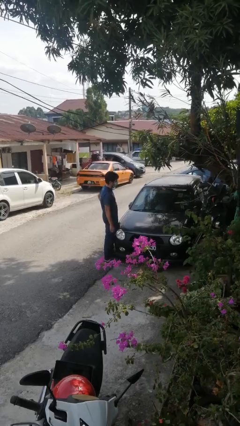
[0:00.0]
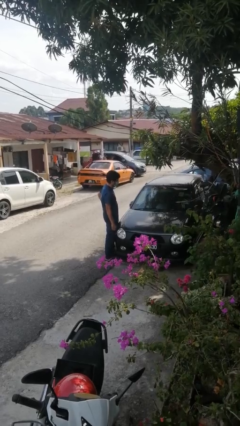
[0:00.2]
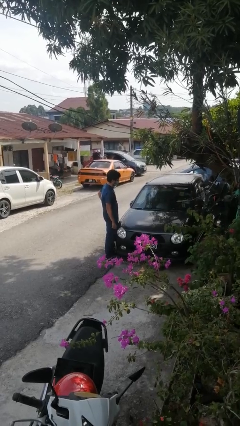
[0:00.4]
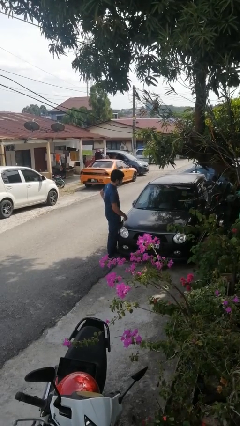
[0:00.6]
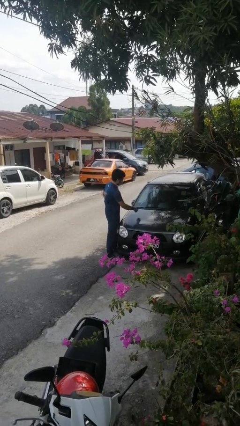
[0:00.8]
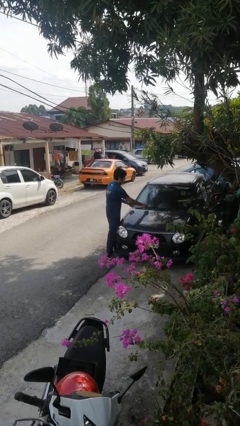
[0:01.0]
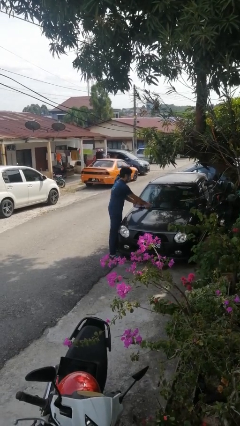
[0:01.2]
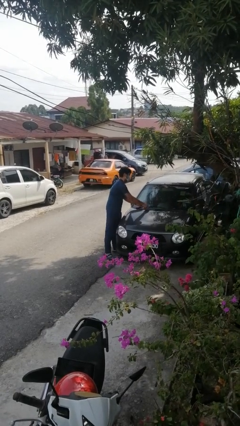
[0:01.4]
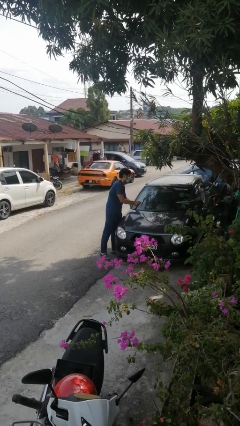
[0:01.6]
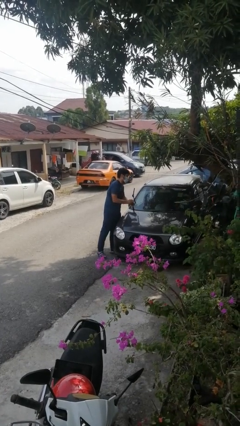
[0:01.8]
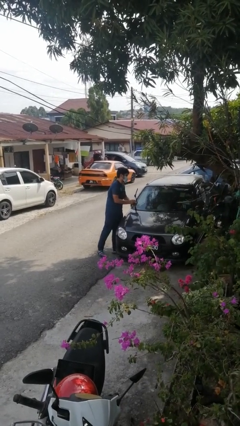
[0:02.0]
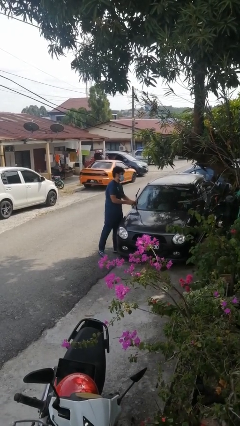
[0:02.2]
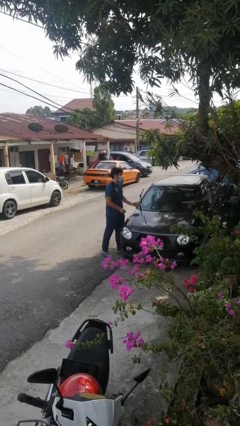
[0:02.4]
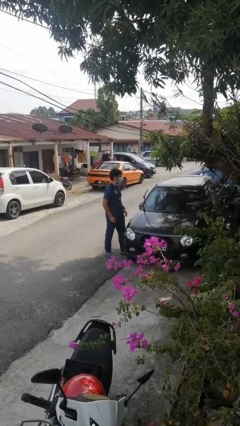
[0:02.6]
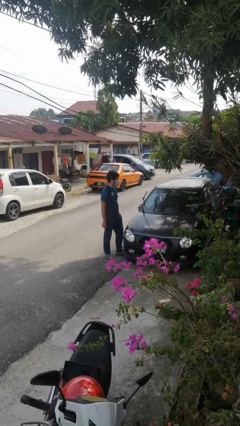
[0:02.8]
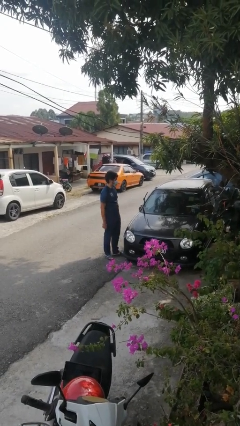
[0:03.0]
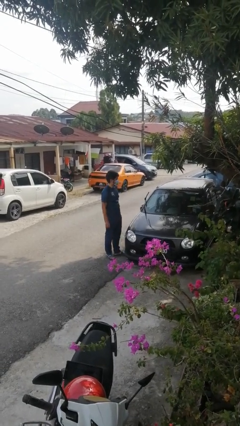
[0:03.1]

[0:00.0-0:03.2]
person flips up car wipers

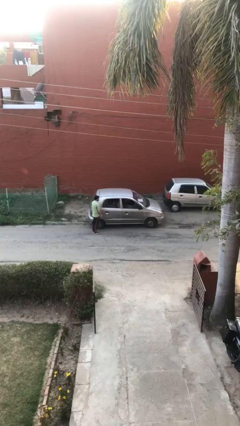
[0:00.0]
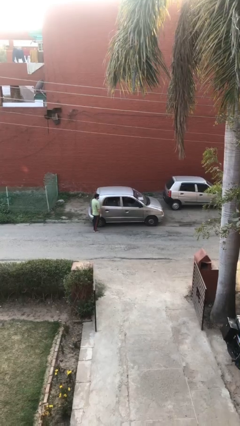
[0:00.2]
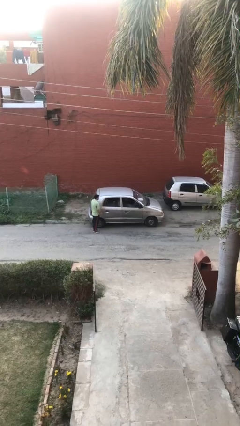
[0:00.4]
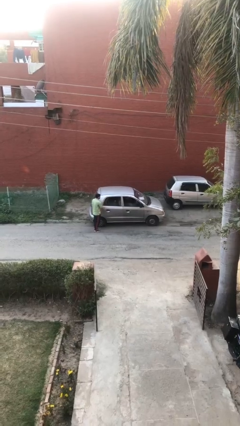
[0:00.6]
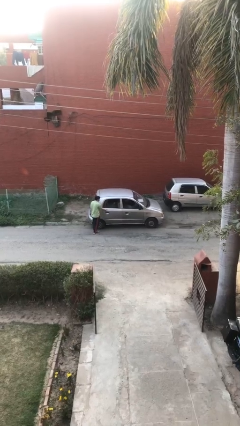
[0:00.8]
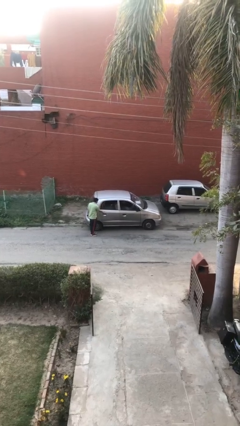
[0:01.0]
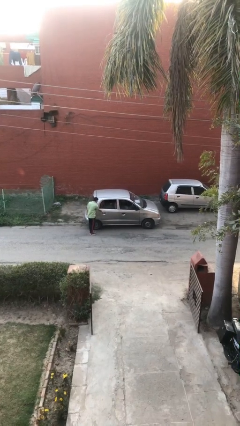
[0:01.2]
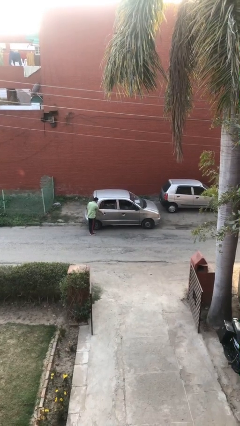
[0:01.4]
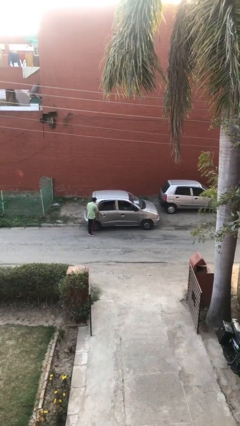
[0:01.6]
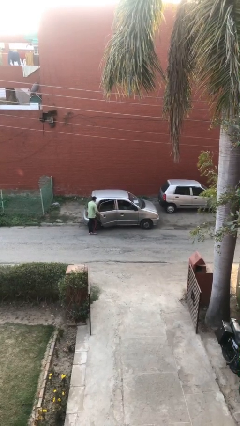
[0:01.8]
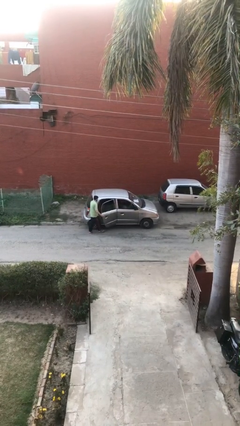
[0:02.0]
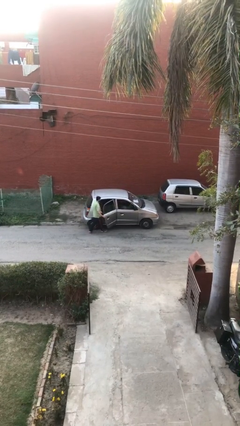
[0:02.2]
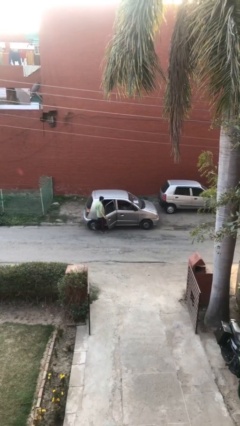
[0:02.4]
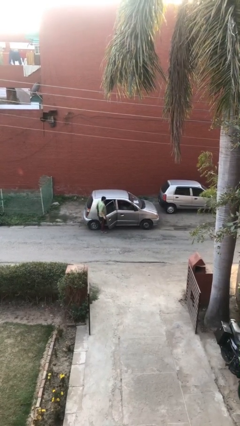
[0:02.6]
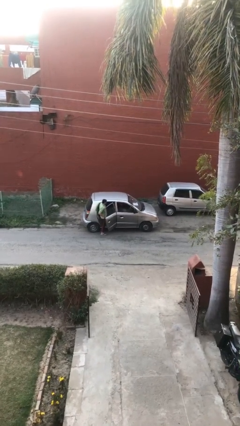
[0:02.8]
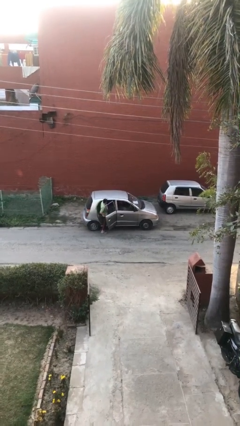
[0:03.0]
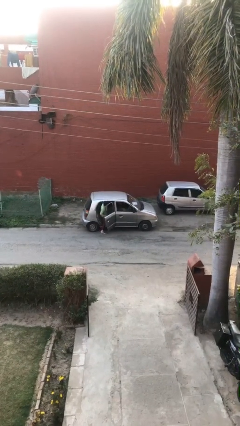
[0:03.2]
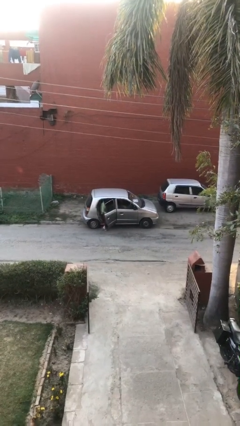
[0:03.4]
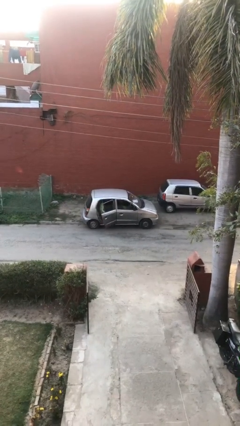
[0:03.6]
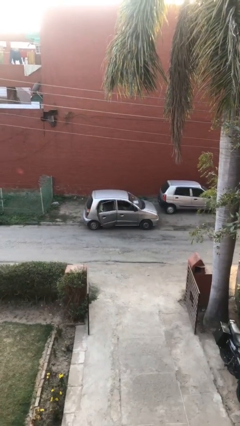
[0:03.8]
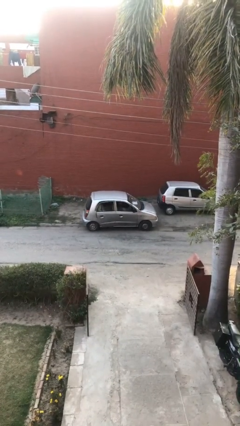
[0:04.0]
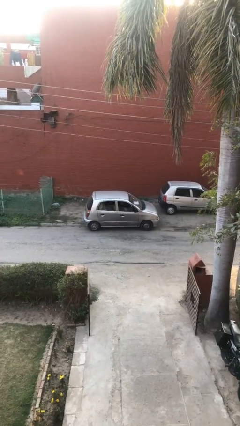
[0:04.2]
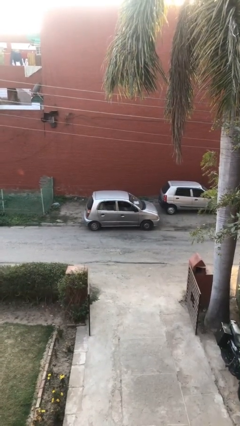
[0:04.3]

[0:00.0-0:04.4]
car picks up person

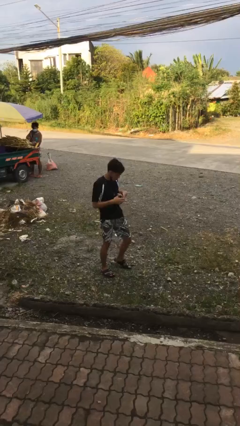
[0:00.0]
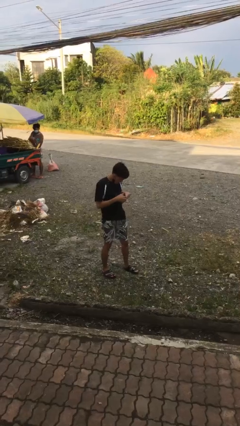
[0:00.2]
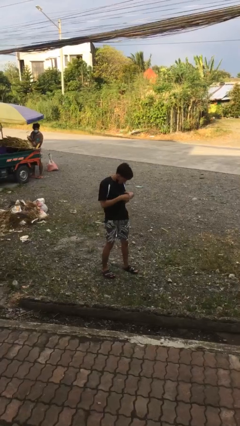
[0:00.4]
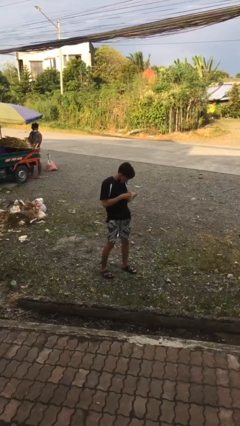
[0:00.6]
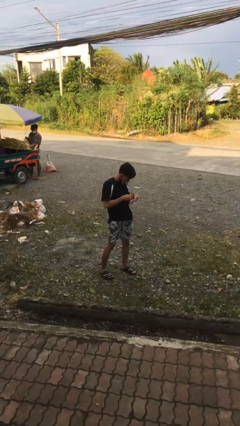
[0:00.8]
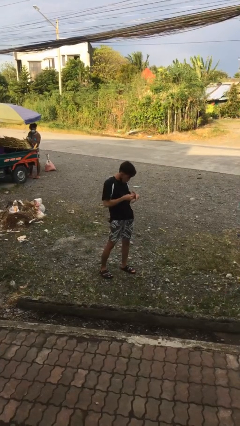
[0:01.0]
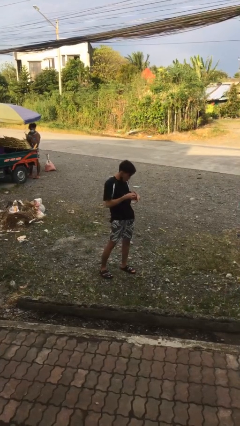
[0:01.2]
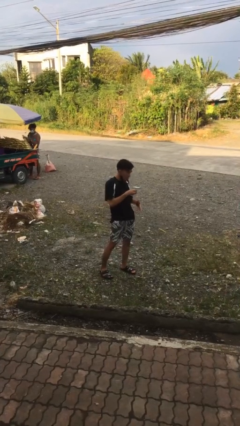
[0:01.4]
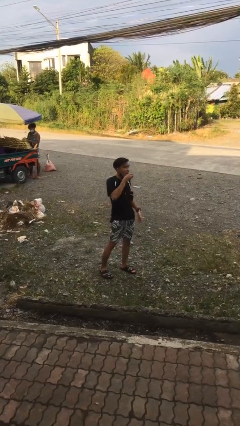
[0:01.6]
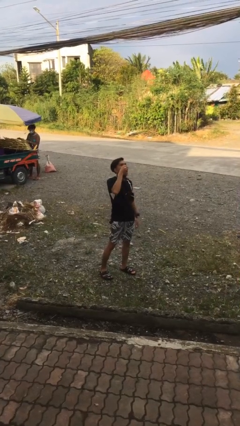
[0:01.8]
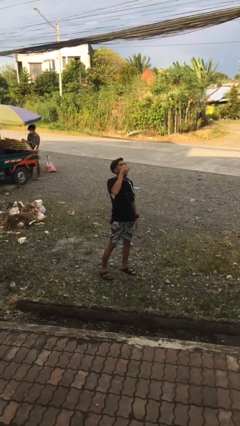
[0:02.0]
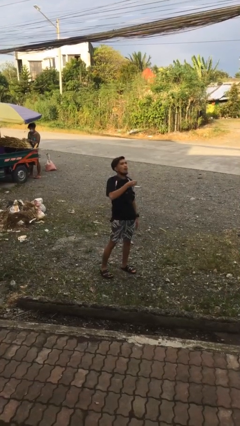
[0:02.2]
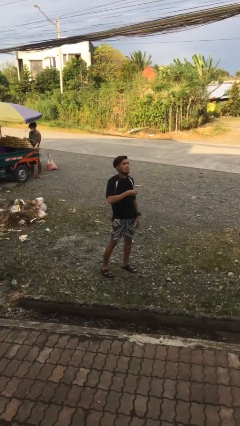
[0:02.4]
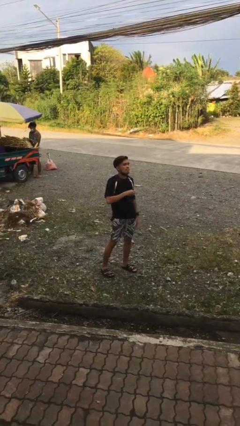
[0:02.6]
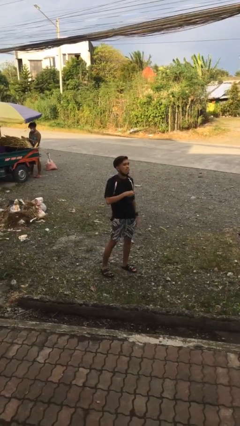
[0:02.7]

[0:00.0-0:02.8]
person eats snack from bag

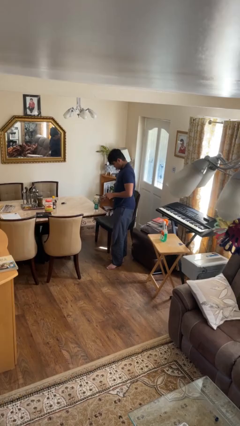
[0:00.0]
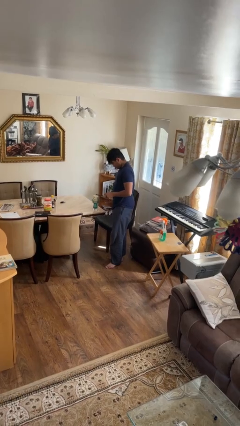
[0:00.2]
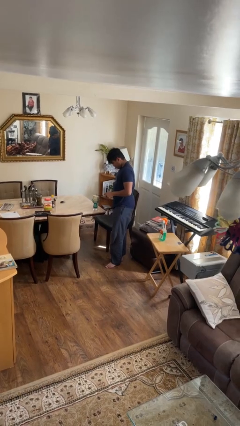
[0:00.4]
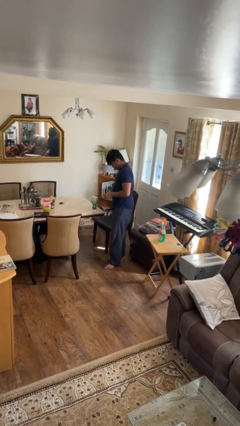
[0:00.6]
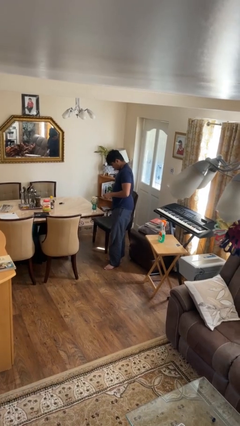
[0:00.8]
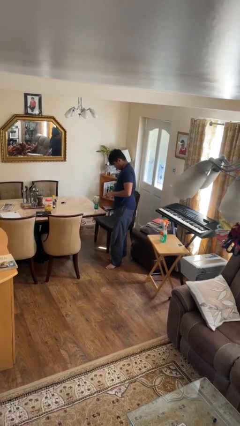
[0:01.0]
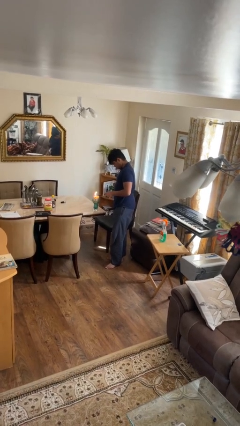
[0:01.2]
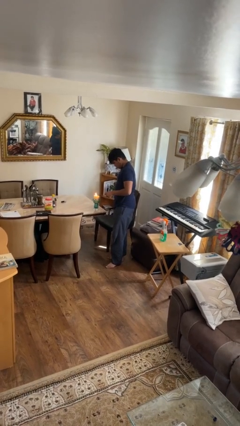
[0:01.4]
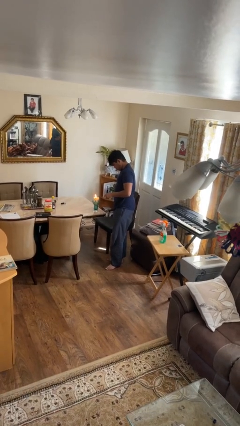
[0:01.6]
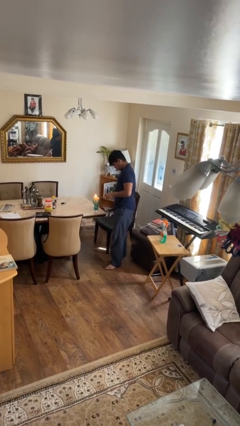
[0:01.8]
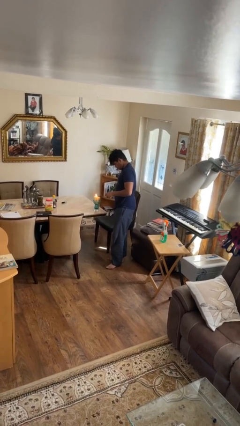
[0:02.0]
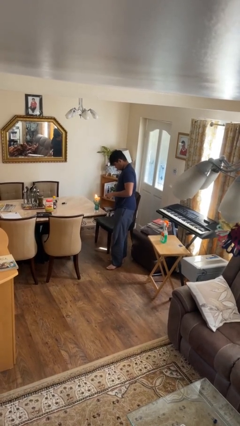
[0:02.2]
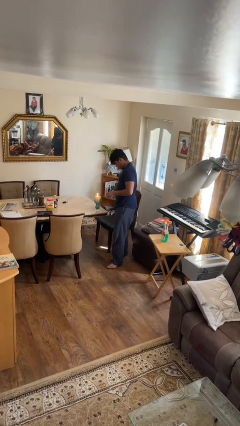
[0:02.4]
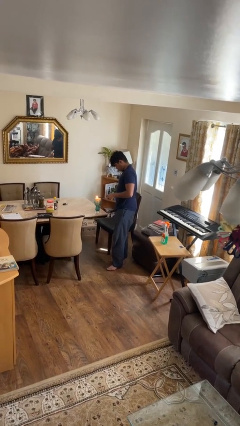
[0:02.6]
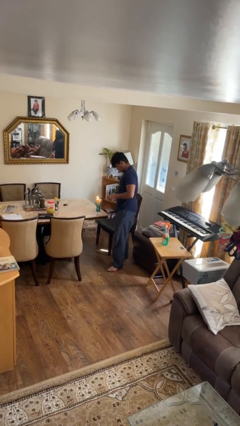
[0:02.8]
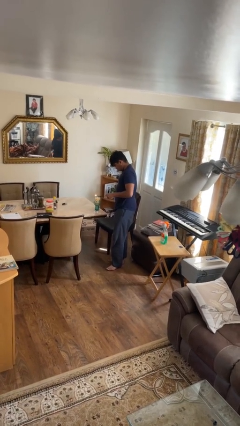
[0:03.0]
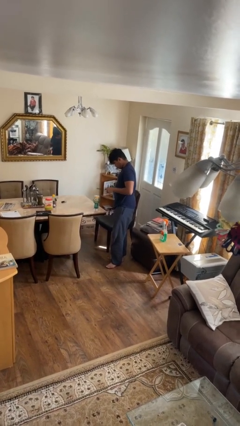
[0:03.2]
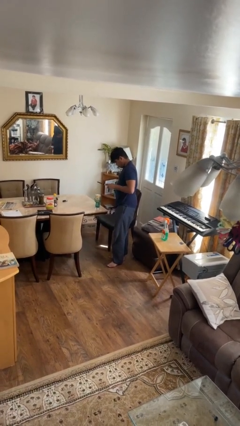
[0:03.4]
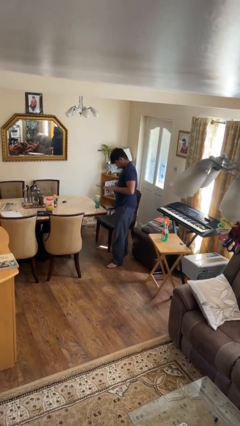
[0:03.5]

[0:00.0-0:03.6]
person lights candle

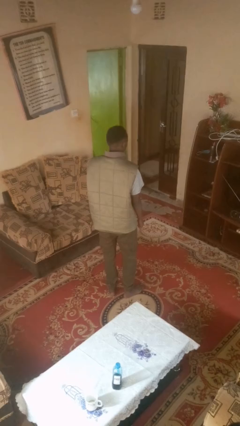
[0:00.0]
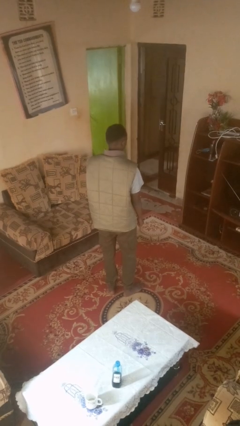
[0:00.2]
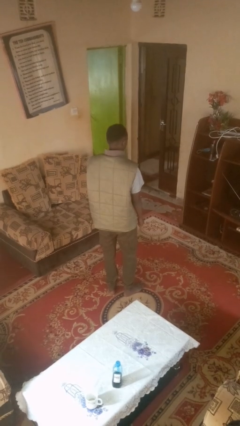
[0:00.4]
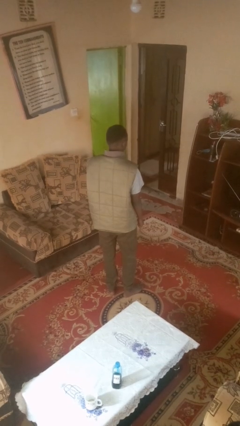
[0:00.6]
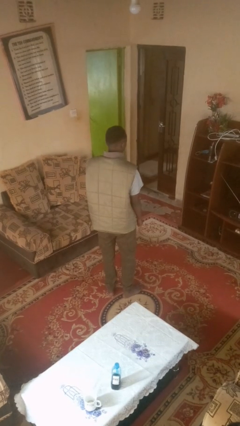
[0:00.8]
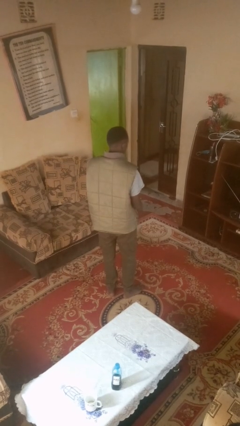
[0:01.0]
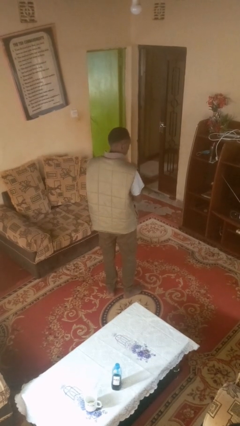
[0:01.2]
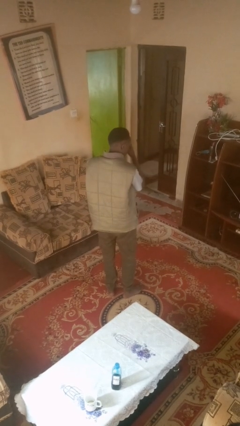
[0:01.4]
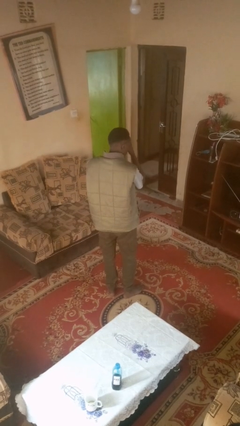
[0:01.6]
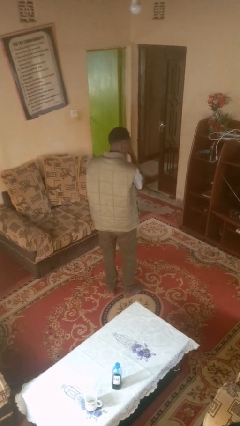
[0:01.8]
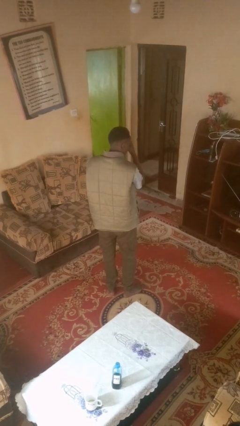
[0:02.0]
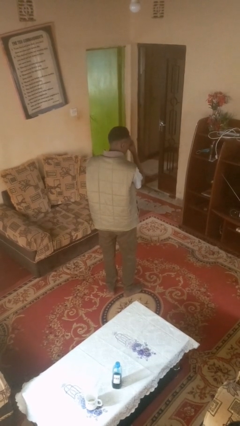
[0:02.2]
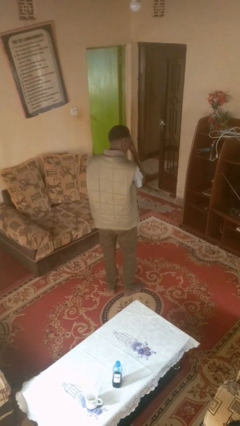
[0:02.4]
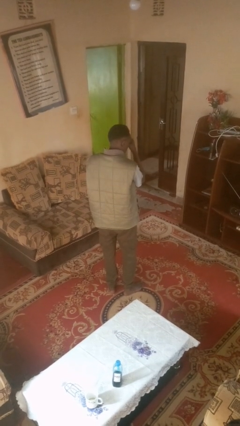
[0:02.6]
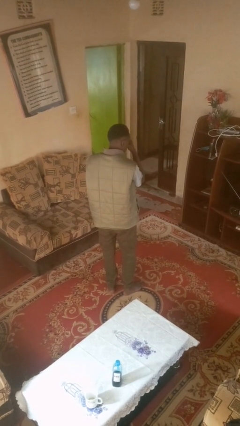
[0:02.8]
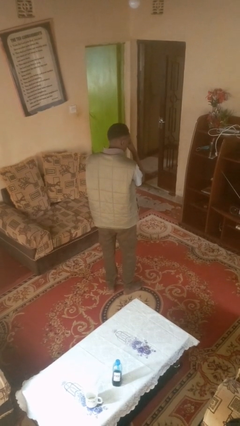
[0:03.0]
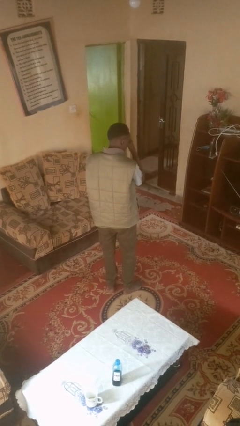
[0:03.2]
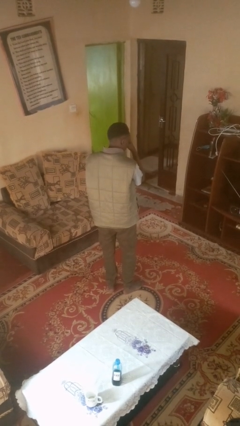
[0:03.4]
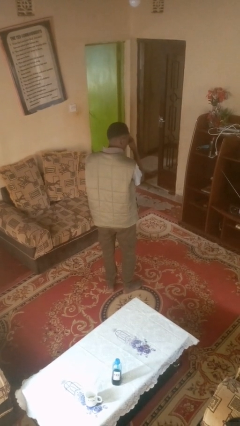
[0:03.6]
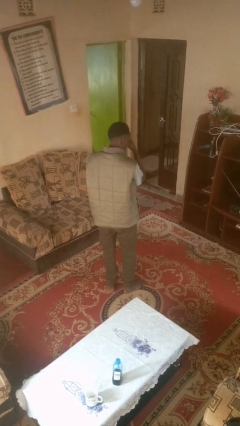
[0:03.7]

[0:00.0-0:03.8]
person brushes hair
